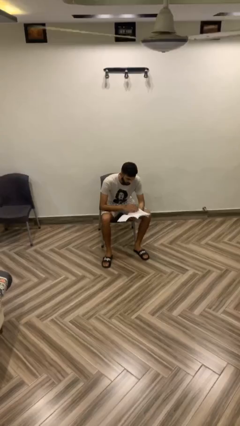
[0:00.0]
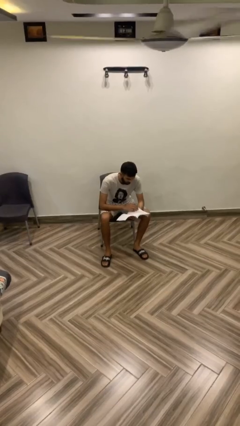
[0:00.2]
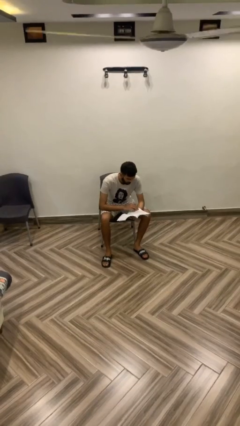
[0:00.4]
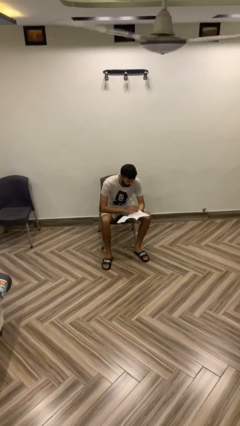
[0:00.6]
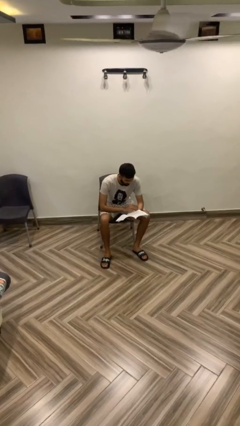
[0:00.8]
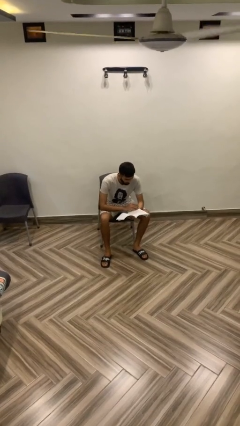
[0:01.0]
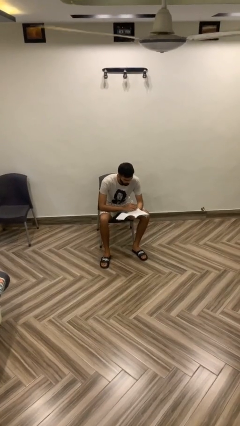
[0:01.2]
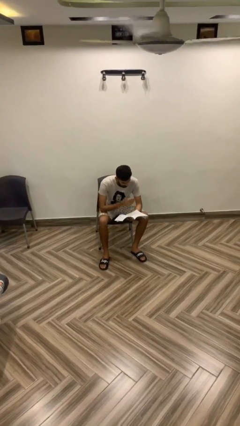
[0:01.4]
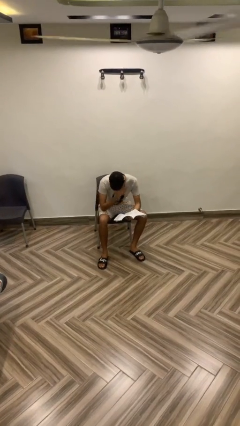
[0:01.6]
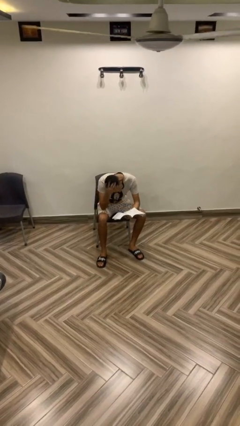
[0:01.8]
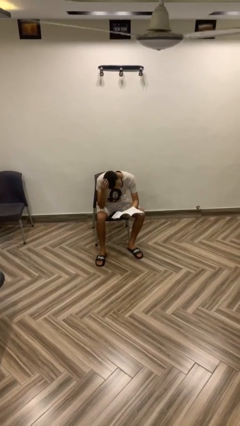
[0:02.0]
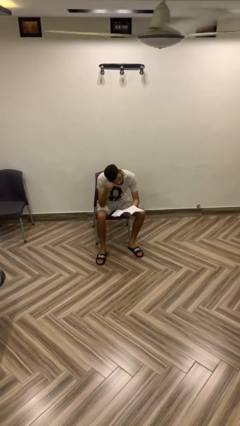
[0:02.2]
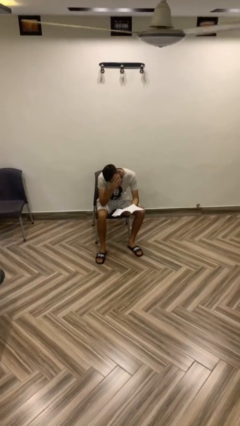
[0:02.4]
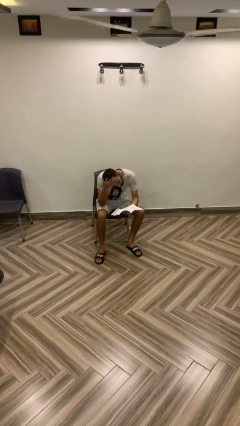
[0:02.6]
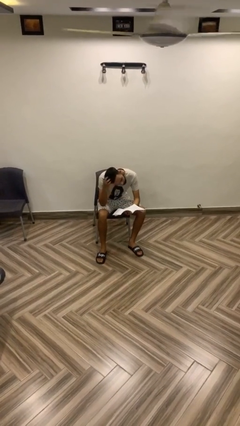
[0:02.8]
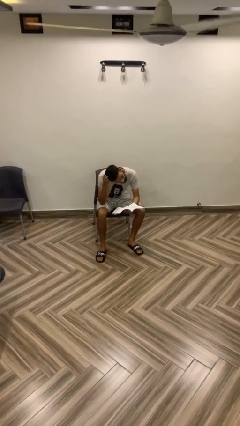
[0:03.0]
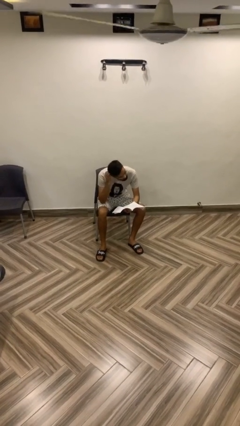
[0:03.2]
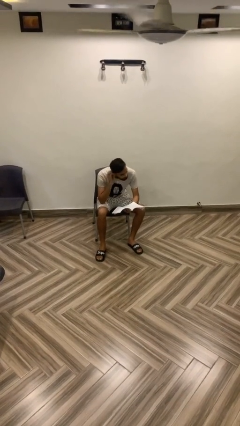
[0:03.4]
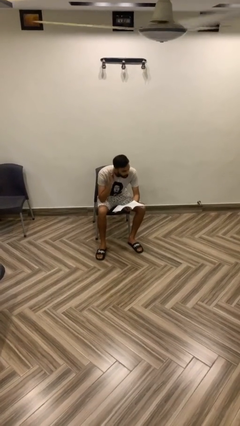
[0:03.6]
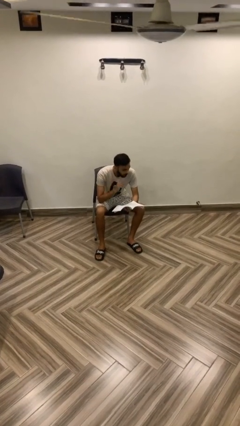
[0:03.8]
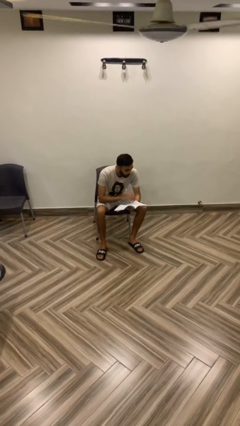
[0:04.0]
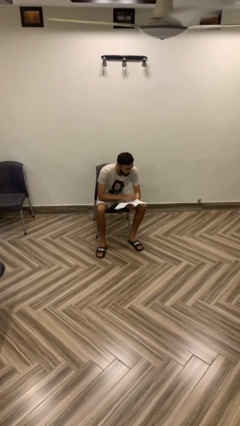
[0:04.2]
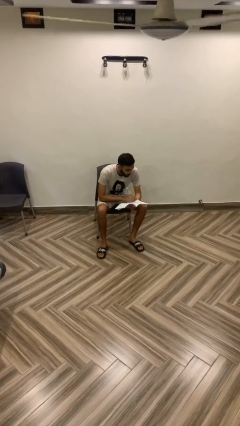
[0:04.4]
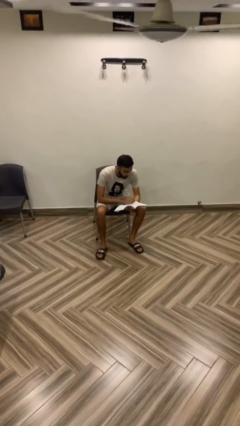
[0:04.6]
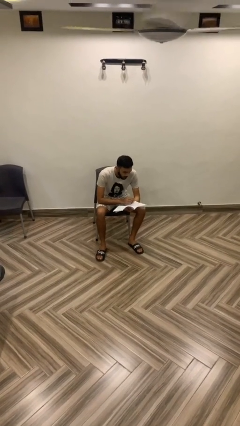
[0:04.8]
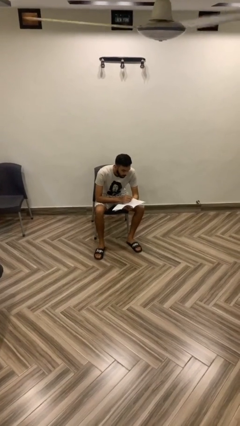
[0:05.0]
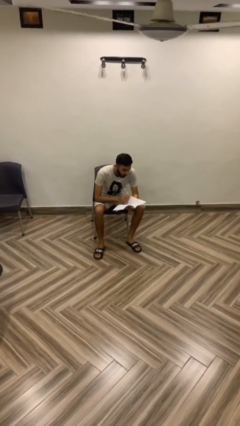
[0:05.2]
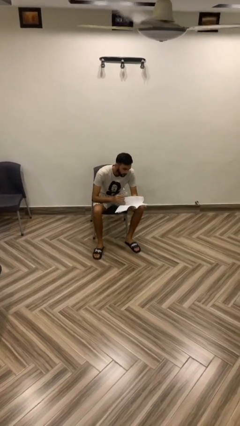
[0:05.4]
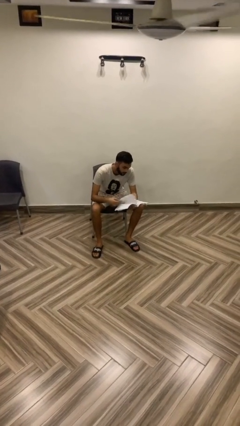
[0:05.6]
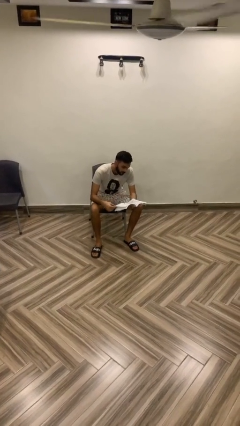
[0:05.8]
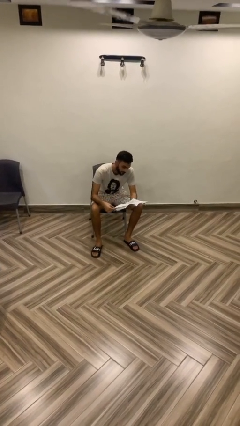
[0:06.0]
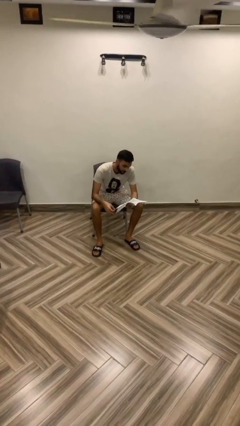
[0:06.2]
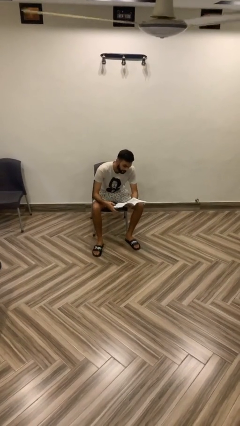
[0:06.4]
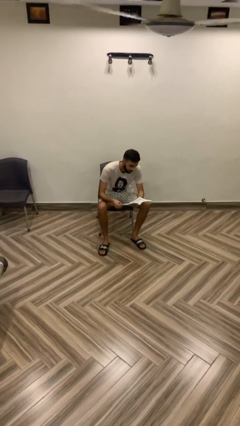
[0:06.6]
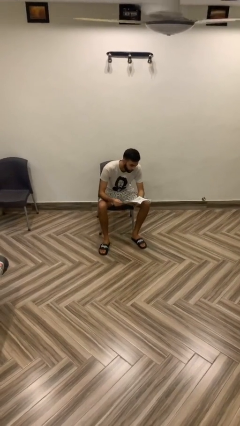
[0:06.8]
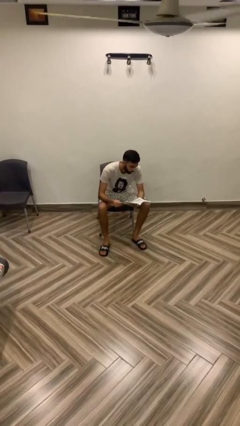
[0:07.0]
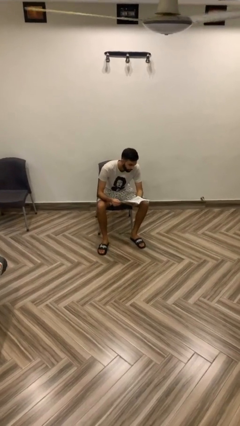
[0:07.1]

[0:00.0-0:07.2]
person reads document

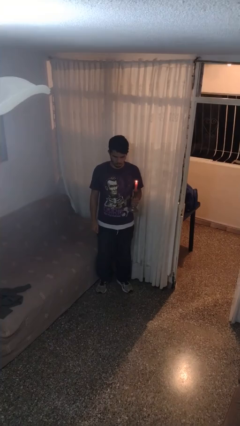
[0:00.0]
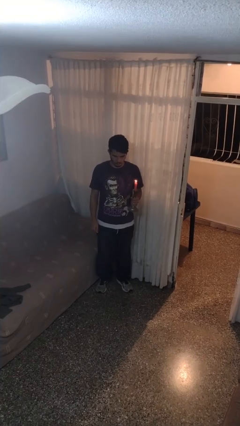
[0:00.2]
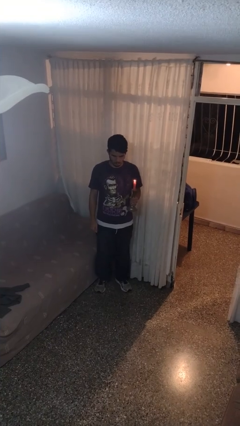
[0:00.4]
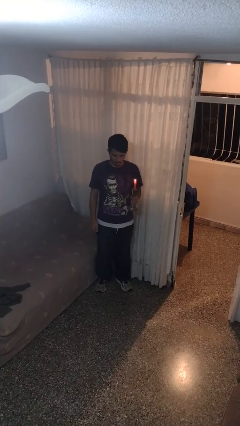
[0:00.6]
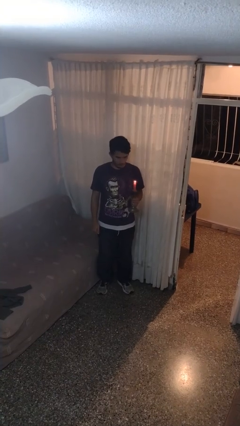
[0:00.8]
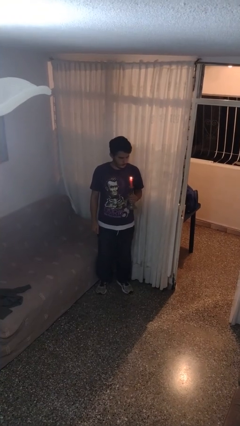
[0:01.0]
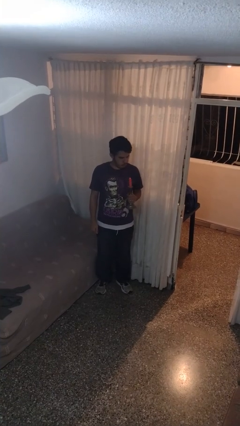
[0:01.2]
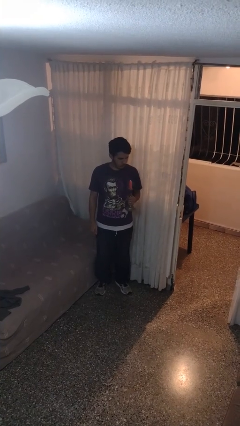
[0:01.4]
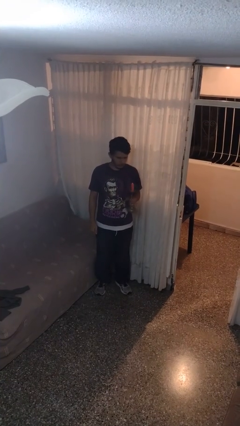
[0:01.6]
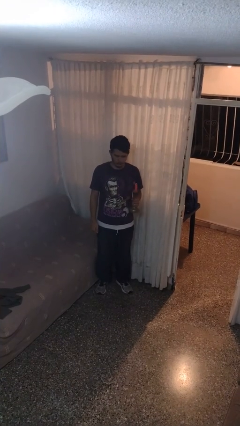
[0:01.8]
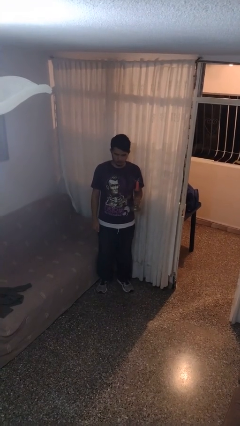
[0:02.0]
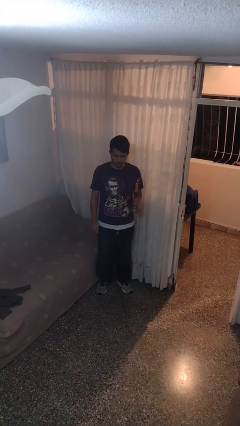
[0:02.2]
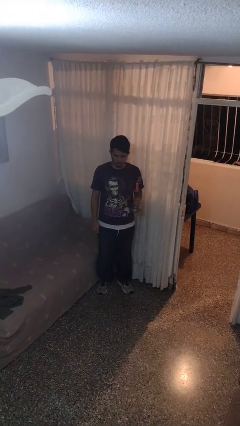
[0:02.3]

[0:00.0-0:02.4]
person extinguishes candle

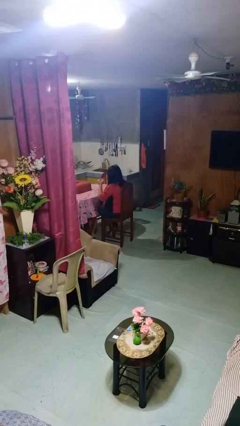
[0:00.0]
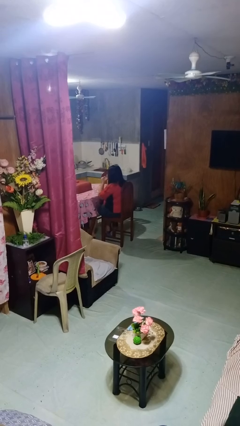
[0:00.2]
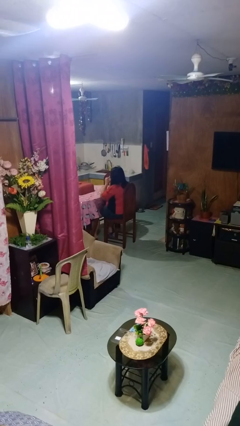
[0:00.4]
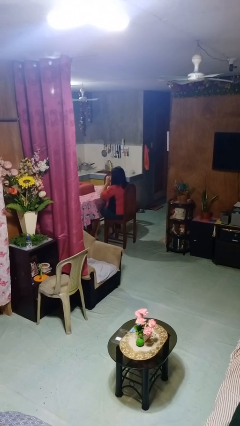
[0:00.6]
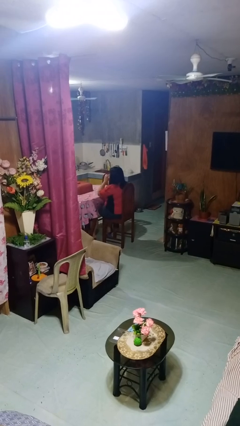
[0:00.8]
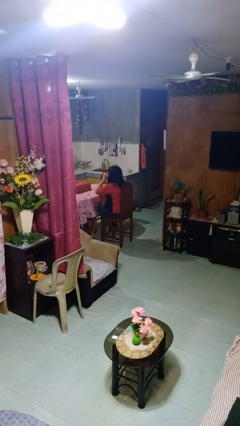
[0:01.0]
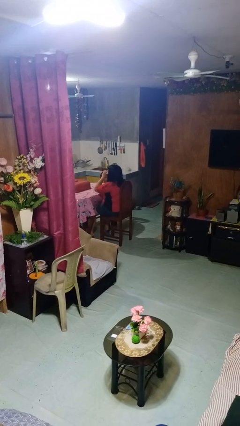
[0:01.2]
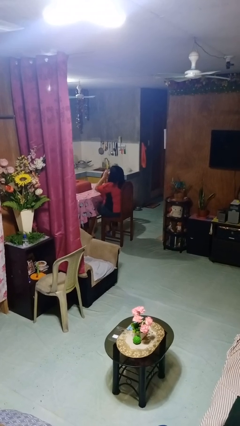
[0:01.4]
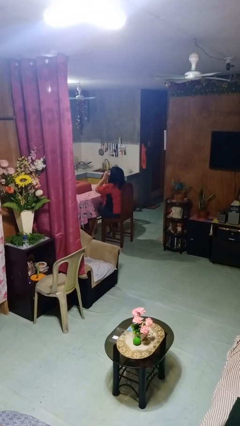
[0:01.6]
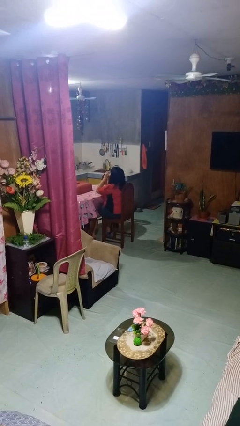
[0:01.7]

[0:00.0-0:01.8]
person drinks from shotglass

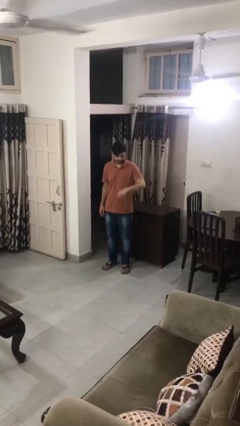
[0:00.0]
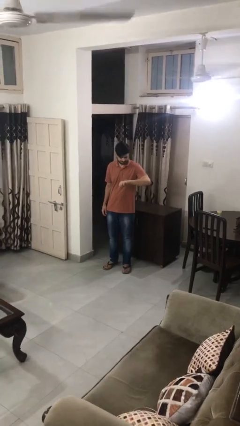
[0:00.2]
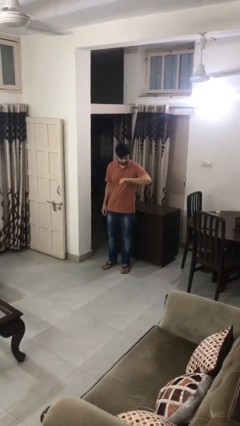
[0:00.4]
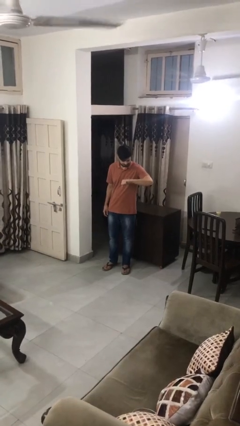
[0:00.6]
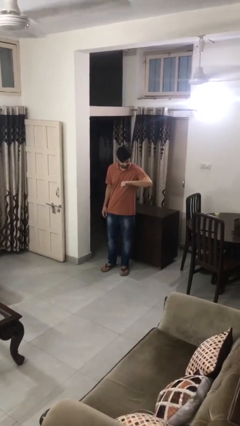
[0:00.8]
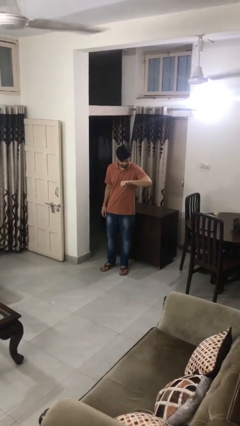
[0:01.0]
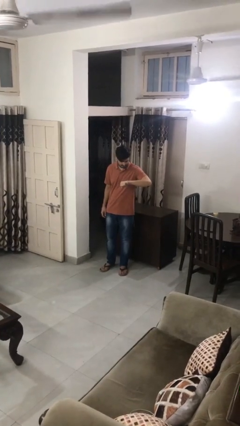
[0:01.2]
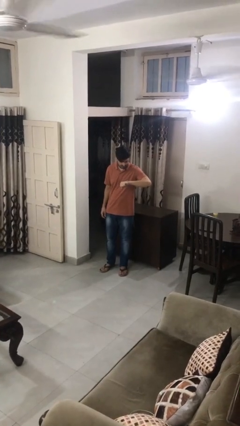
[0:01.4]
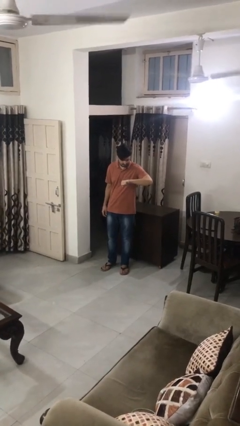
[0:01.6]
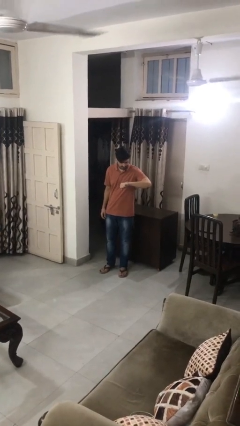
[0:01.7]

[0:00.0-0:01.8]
person looks at wristwatch

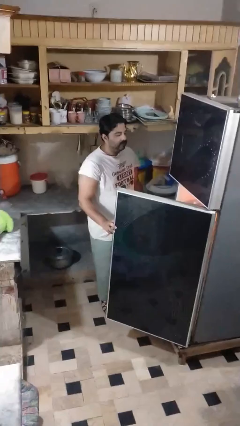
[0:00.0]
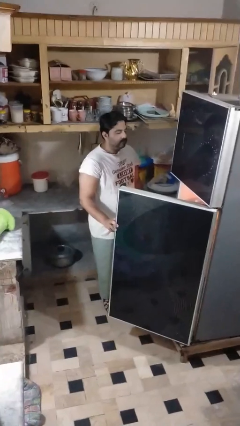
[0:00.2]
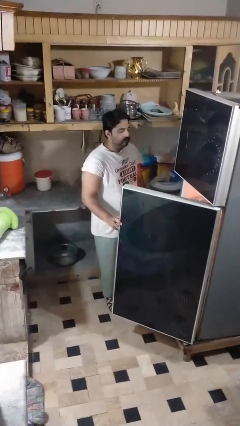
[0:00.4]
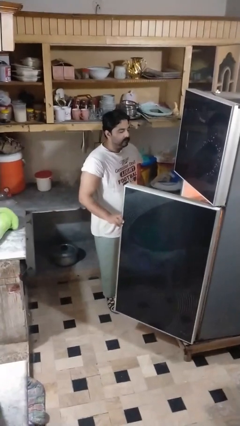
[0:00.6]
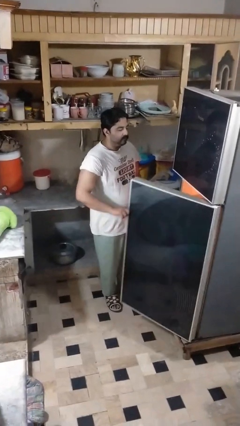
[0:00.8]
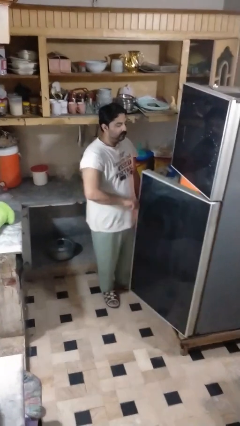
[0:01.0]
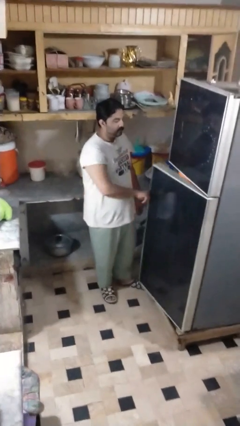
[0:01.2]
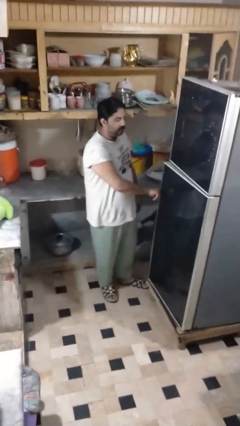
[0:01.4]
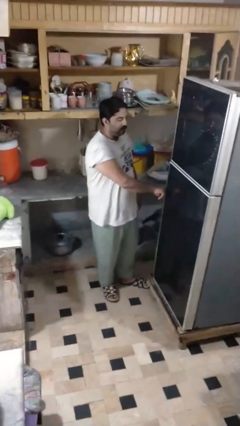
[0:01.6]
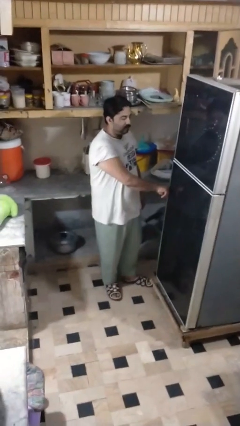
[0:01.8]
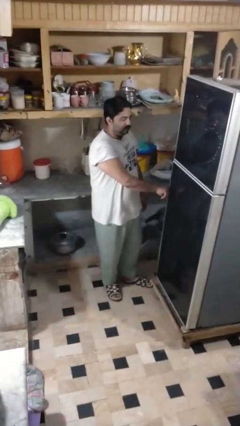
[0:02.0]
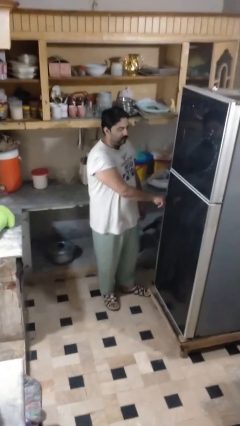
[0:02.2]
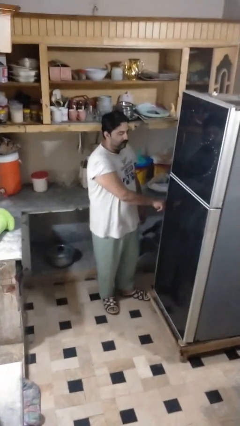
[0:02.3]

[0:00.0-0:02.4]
person closes refrigerator

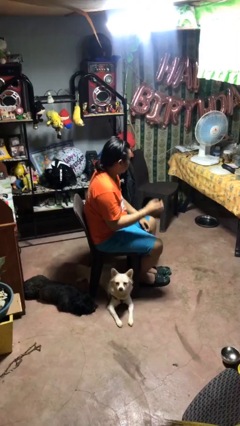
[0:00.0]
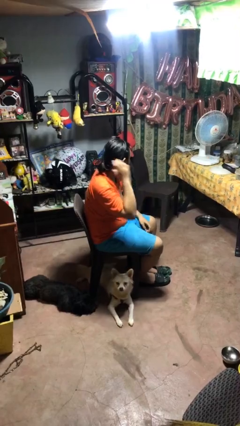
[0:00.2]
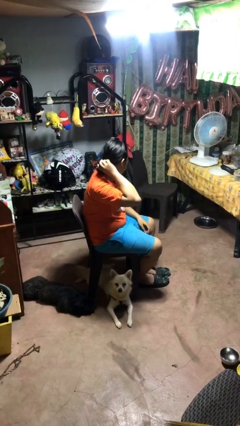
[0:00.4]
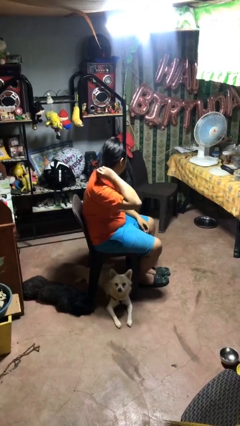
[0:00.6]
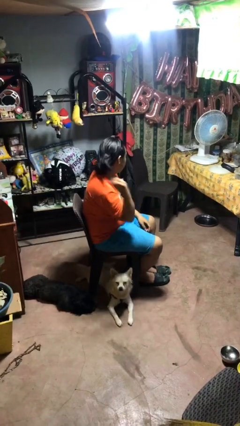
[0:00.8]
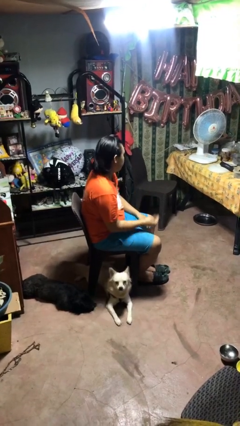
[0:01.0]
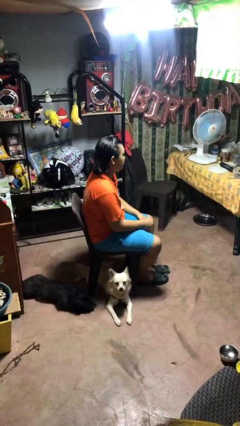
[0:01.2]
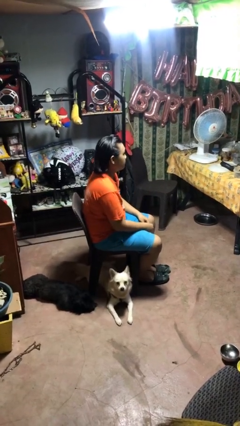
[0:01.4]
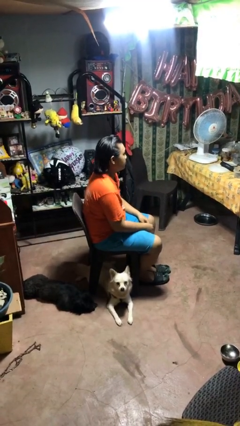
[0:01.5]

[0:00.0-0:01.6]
person takes off hairtie
